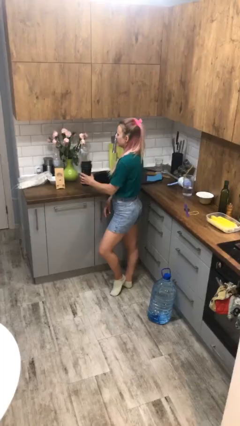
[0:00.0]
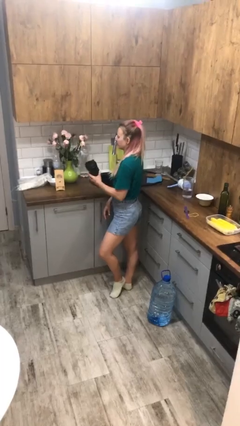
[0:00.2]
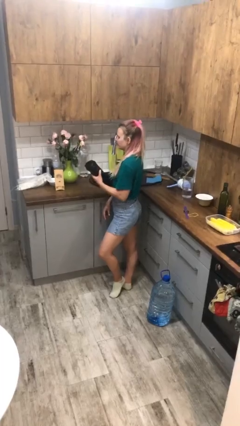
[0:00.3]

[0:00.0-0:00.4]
person picks up object from countertop

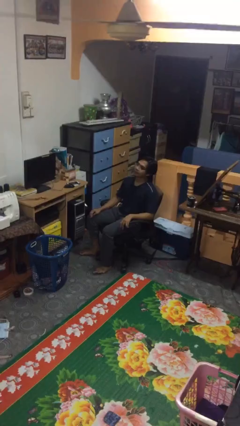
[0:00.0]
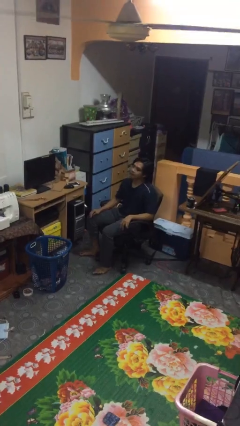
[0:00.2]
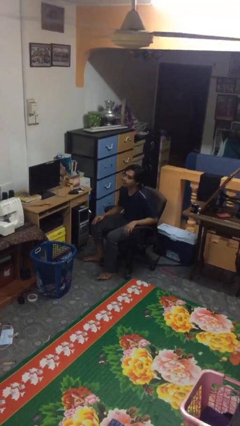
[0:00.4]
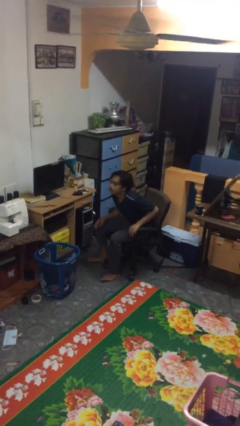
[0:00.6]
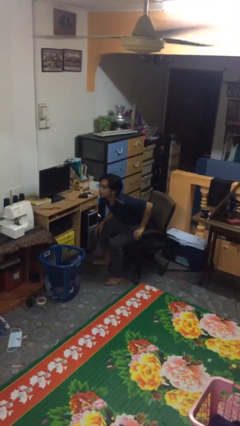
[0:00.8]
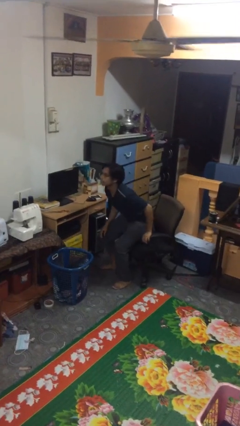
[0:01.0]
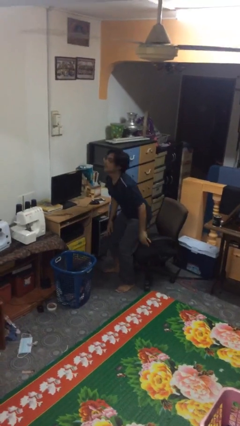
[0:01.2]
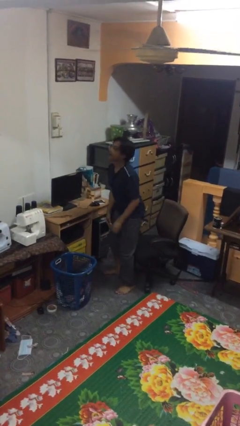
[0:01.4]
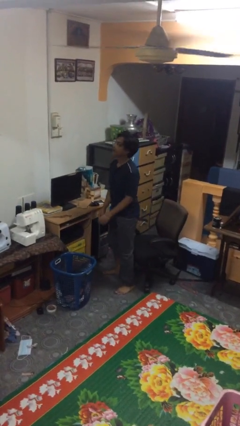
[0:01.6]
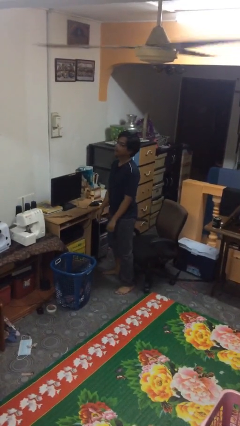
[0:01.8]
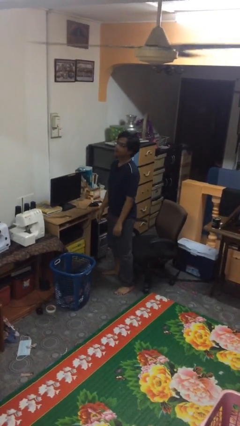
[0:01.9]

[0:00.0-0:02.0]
person stands up

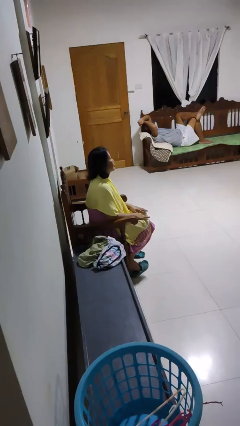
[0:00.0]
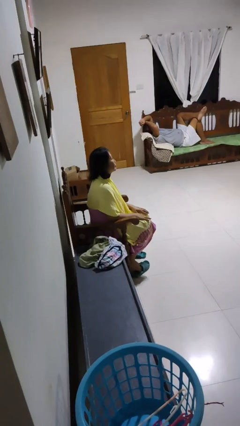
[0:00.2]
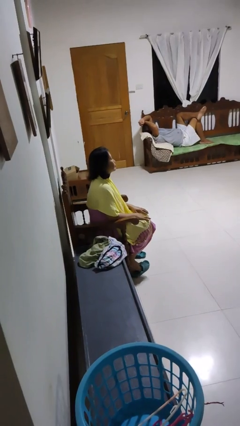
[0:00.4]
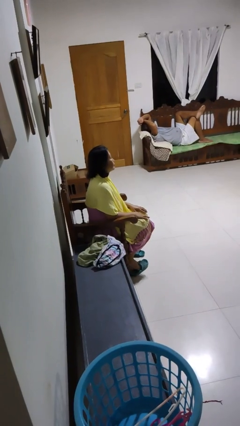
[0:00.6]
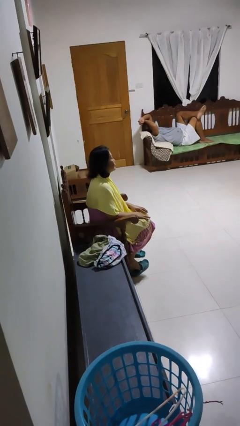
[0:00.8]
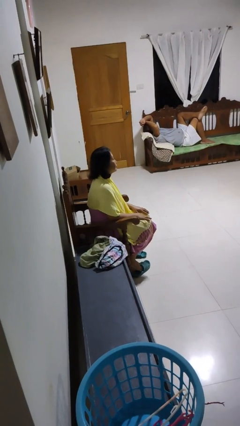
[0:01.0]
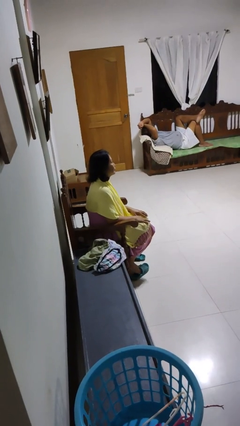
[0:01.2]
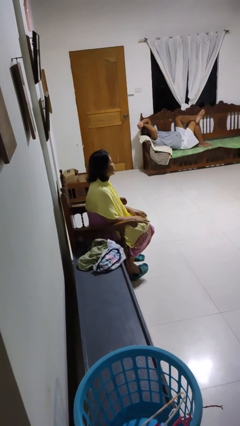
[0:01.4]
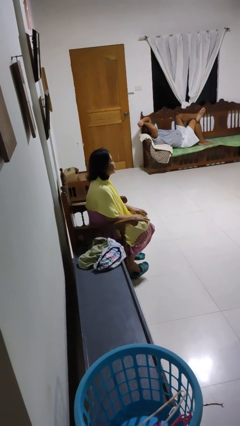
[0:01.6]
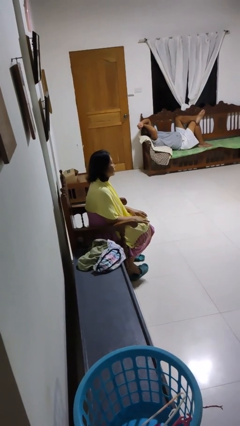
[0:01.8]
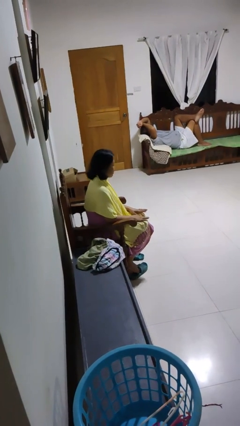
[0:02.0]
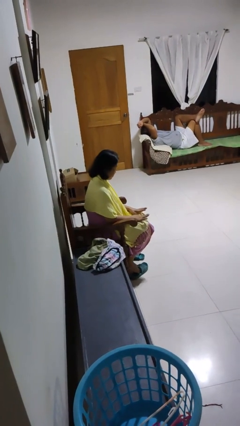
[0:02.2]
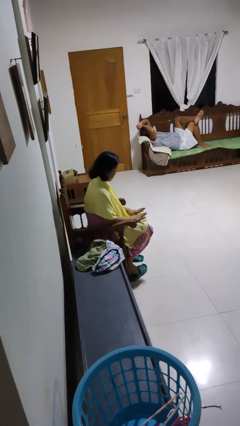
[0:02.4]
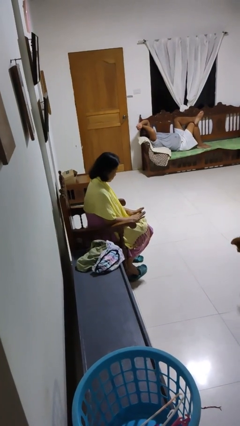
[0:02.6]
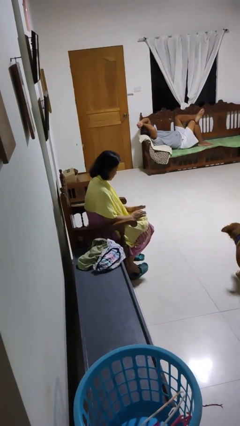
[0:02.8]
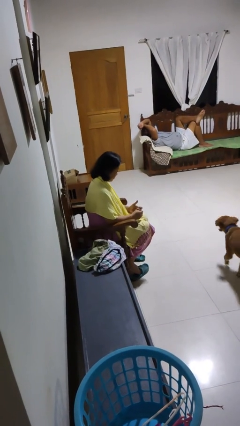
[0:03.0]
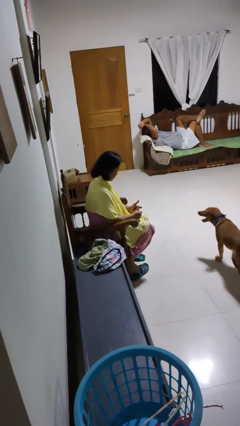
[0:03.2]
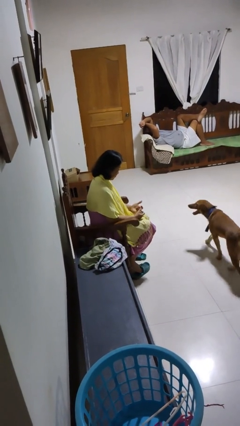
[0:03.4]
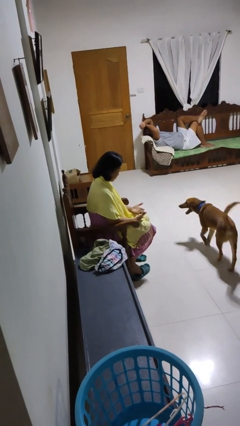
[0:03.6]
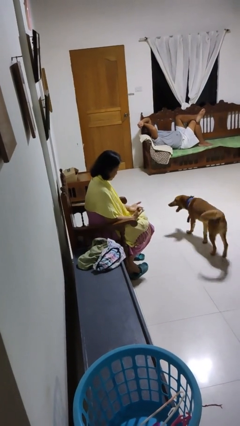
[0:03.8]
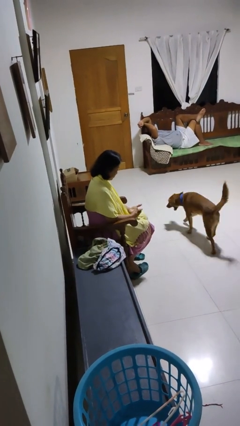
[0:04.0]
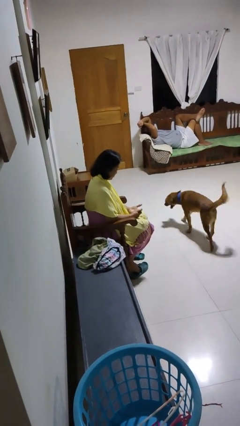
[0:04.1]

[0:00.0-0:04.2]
person looks at hands in lap

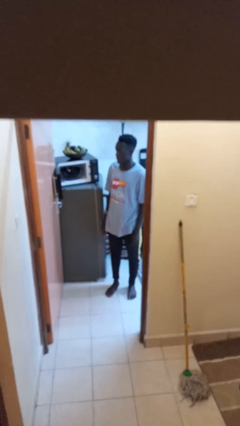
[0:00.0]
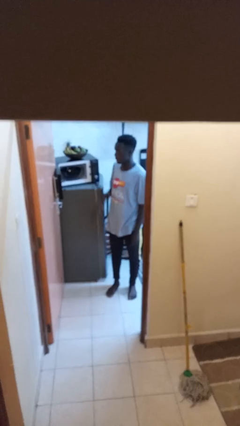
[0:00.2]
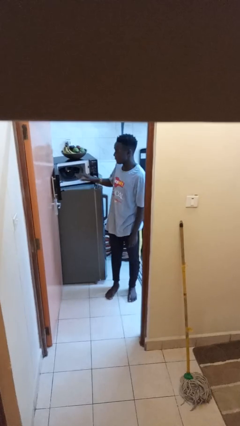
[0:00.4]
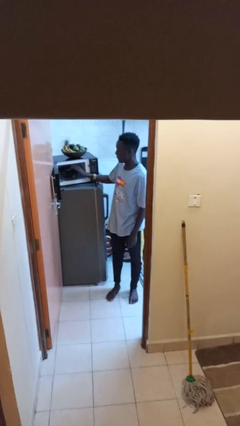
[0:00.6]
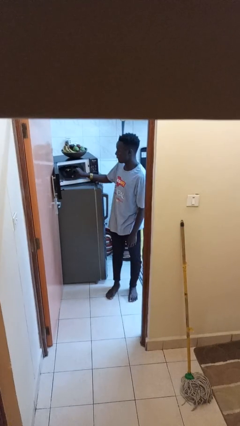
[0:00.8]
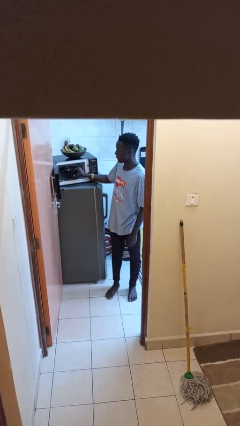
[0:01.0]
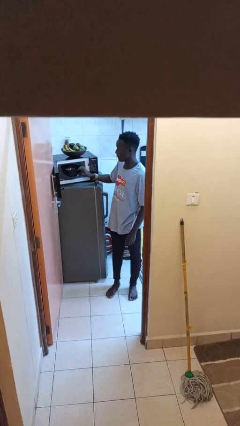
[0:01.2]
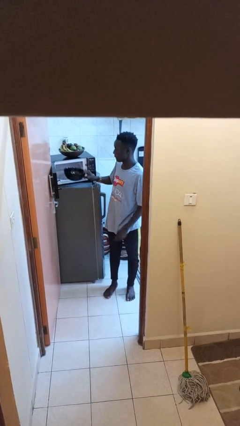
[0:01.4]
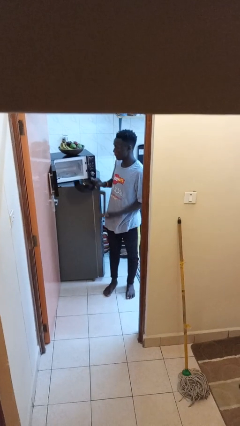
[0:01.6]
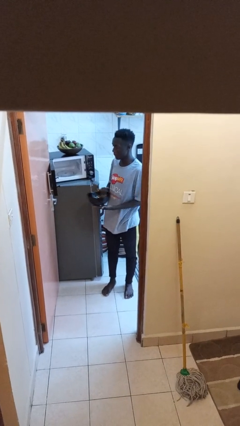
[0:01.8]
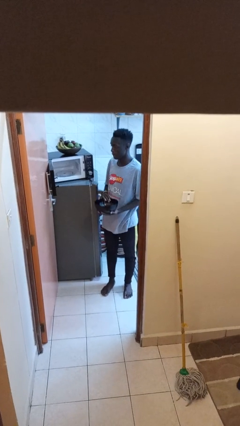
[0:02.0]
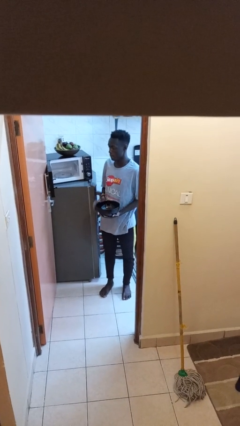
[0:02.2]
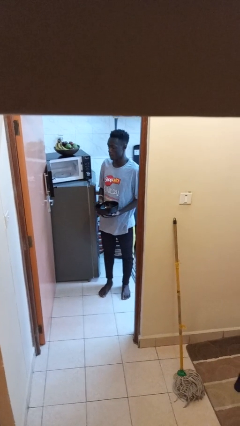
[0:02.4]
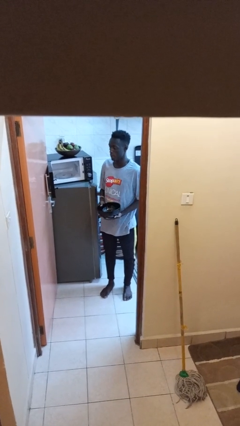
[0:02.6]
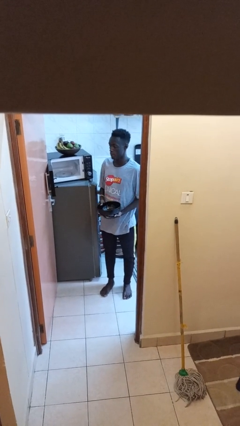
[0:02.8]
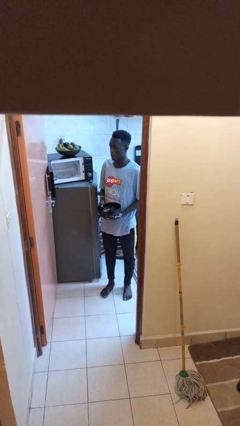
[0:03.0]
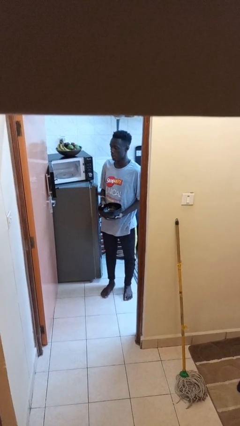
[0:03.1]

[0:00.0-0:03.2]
person takes object from microwave

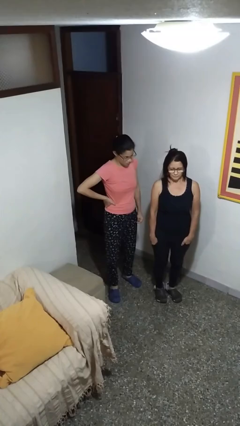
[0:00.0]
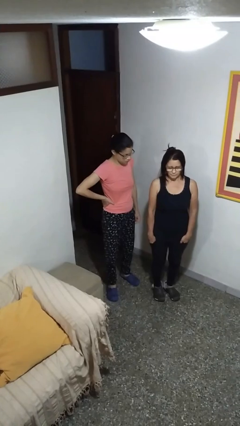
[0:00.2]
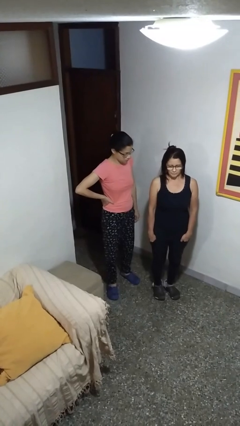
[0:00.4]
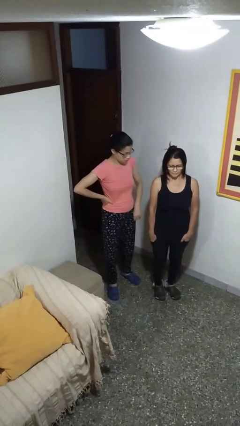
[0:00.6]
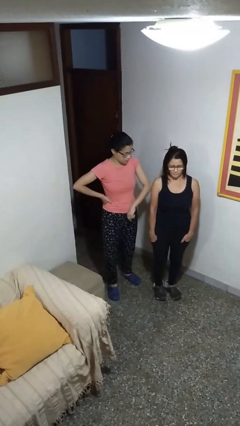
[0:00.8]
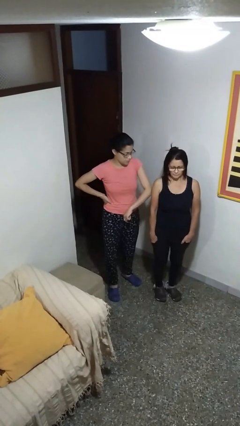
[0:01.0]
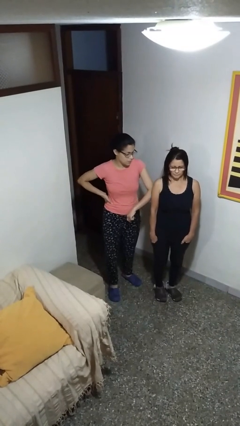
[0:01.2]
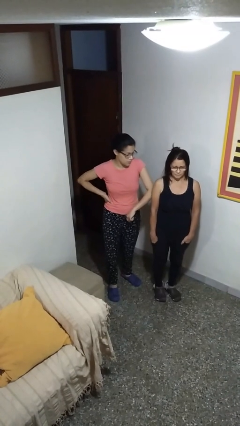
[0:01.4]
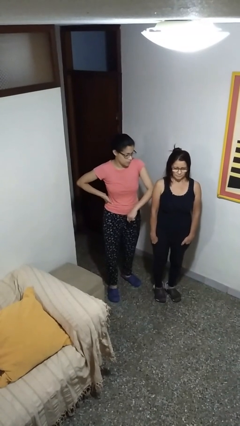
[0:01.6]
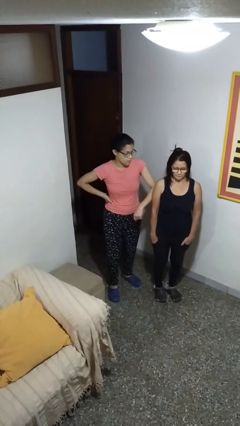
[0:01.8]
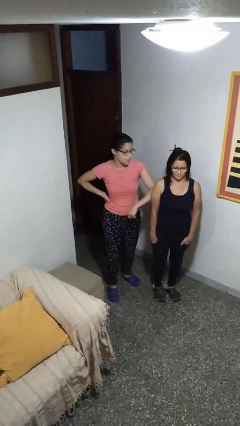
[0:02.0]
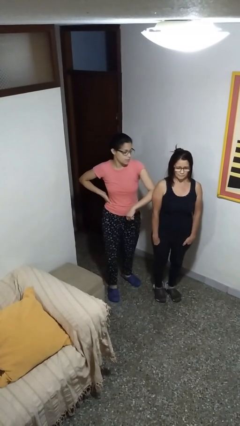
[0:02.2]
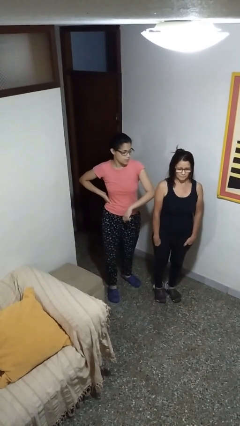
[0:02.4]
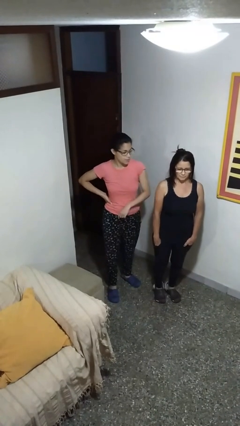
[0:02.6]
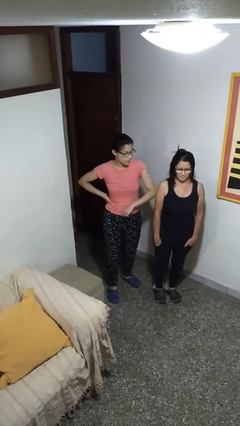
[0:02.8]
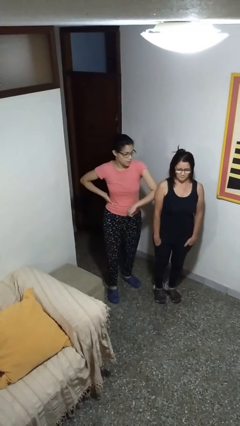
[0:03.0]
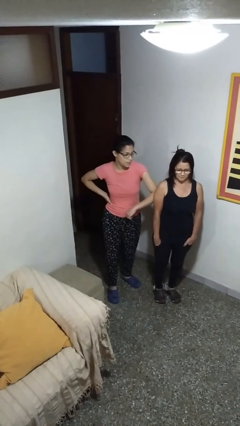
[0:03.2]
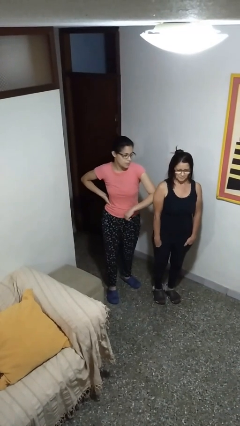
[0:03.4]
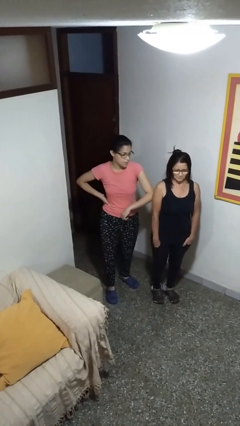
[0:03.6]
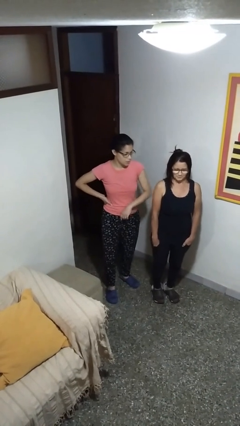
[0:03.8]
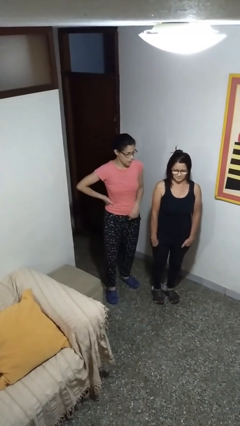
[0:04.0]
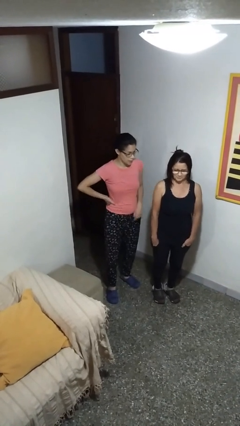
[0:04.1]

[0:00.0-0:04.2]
person nudges person with elbow

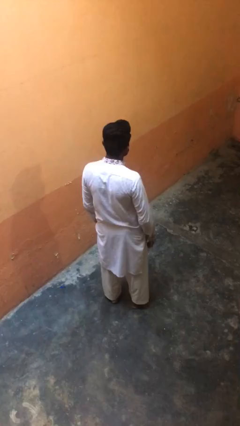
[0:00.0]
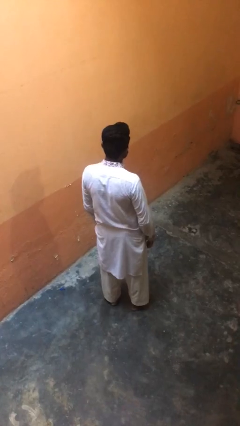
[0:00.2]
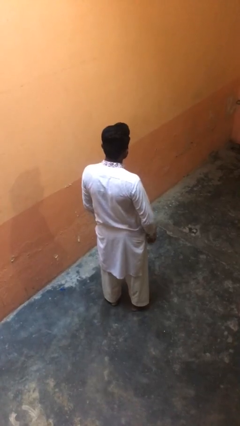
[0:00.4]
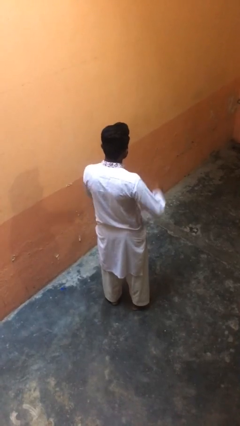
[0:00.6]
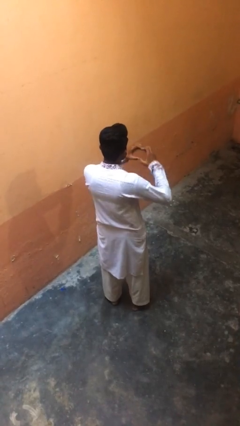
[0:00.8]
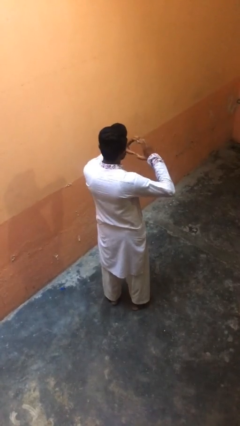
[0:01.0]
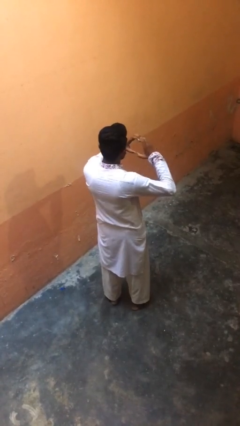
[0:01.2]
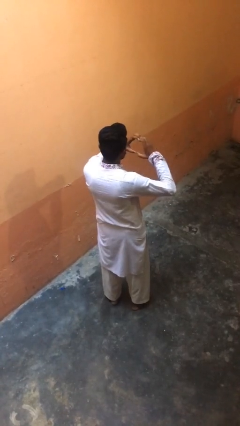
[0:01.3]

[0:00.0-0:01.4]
person gestures heart

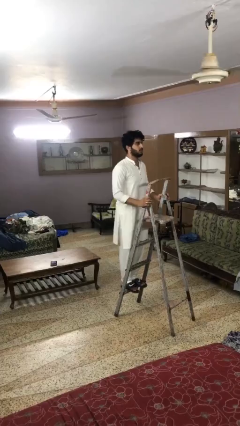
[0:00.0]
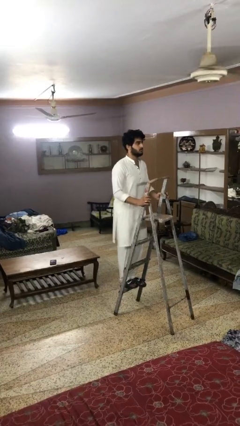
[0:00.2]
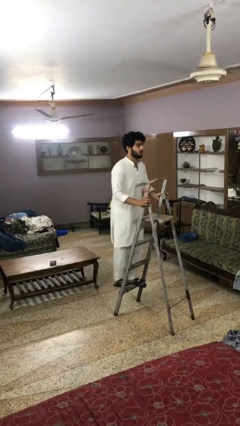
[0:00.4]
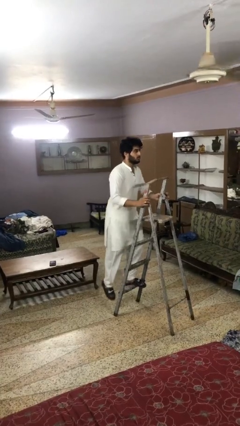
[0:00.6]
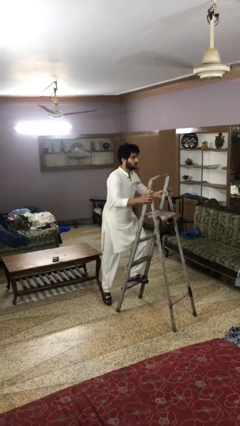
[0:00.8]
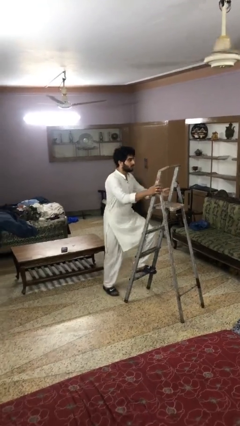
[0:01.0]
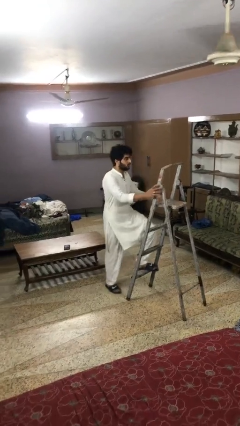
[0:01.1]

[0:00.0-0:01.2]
person climbs down ladder
